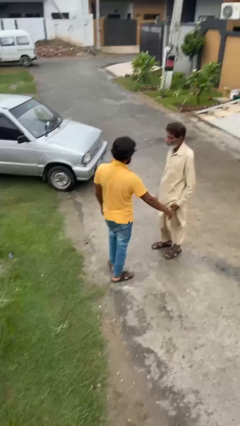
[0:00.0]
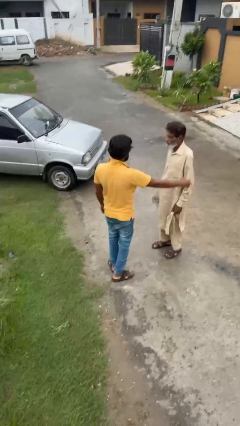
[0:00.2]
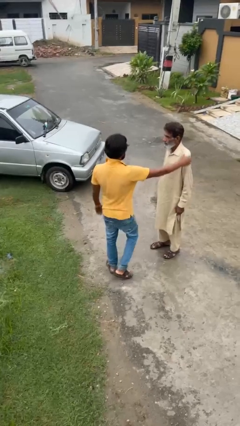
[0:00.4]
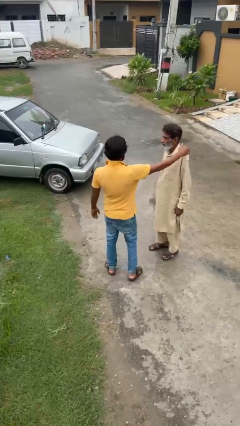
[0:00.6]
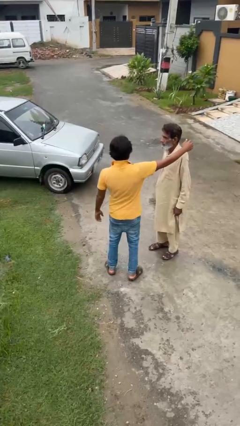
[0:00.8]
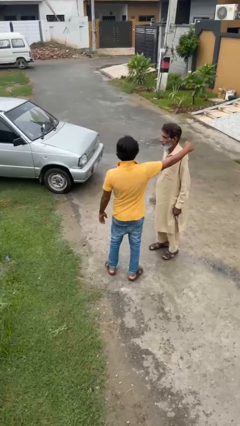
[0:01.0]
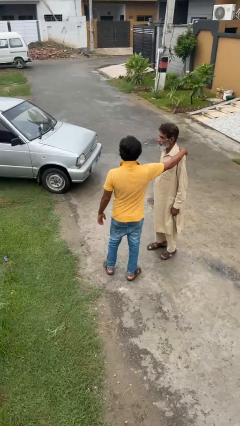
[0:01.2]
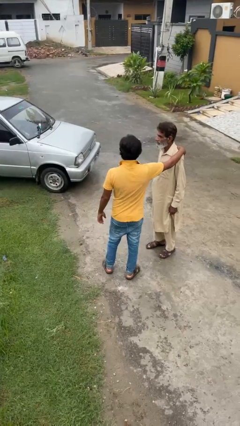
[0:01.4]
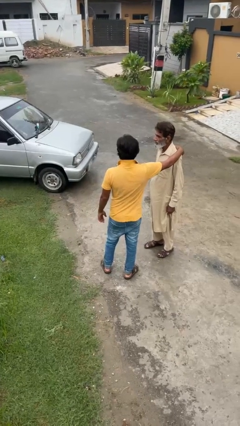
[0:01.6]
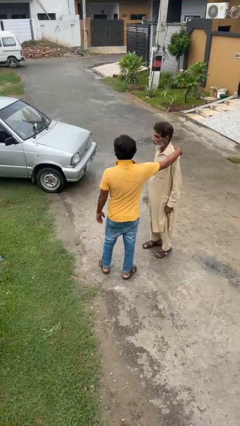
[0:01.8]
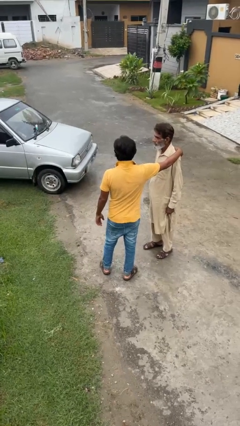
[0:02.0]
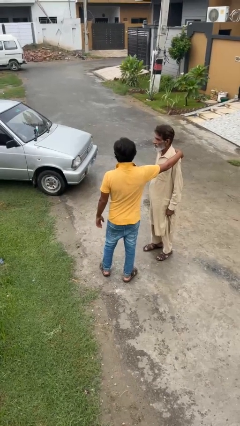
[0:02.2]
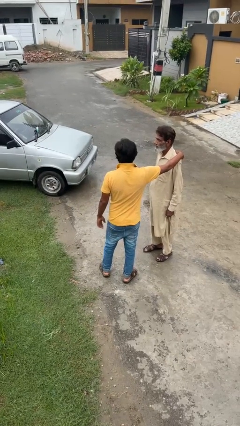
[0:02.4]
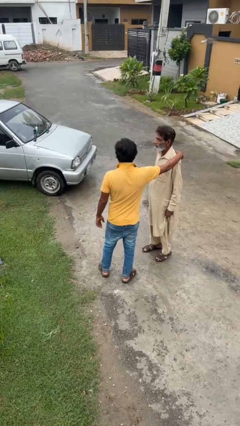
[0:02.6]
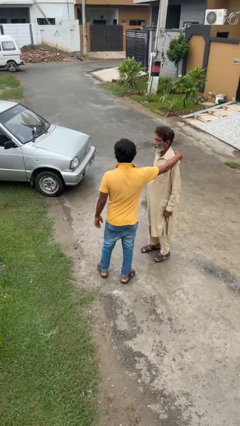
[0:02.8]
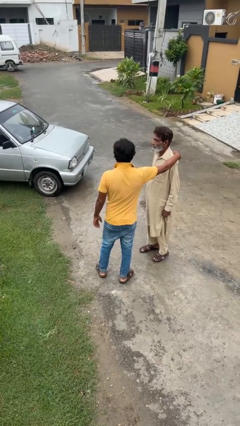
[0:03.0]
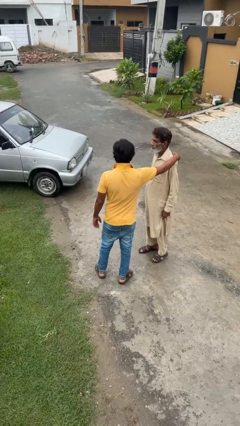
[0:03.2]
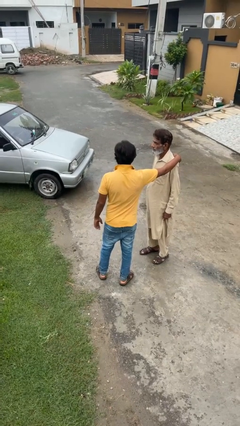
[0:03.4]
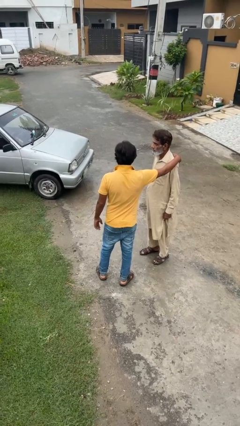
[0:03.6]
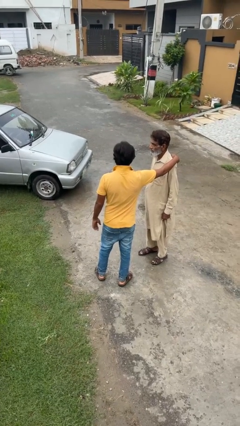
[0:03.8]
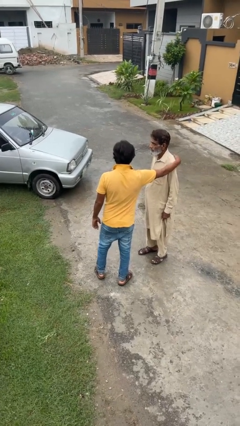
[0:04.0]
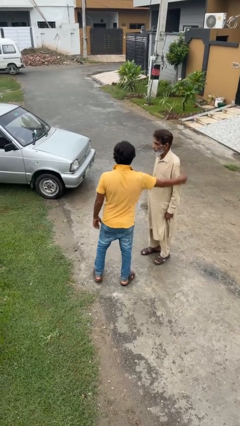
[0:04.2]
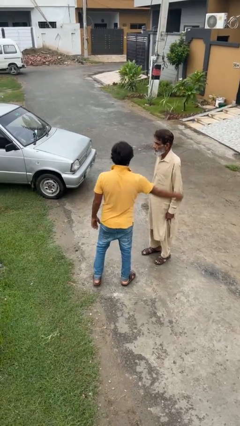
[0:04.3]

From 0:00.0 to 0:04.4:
person pounds shoulders of person

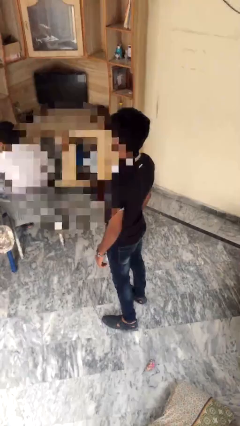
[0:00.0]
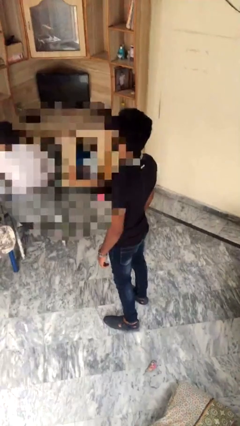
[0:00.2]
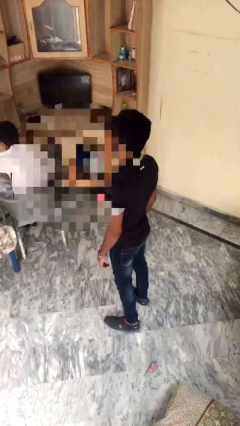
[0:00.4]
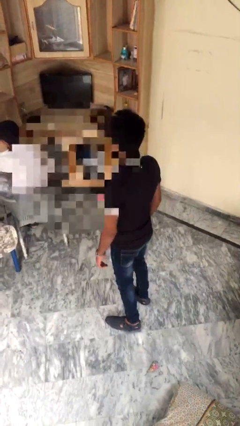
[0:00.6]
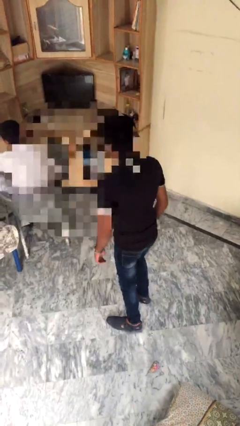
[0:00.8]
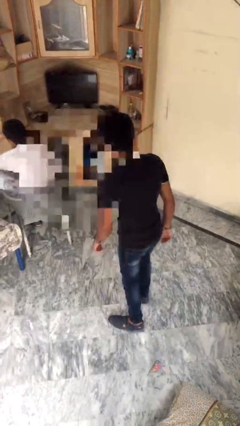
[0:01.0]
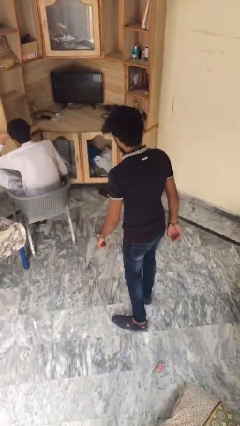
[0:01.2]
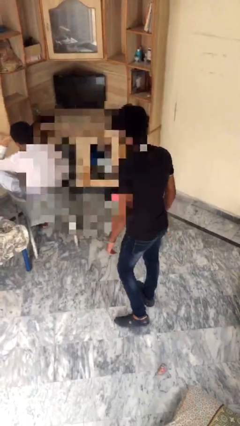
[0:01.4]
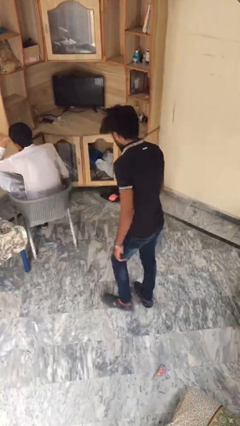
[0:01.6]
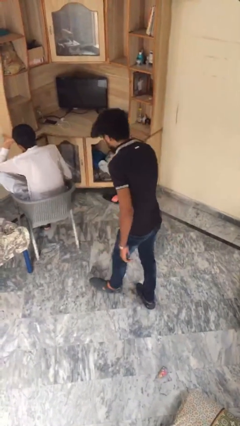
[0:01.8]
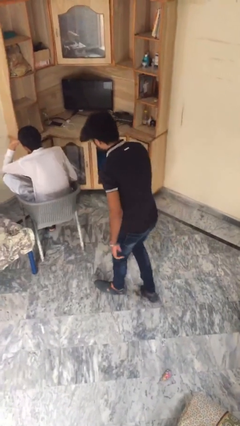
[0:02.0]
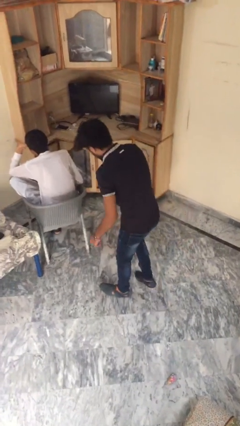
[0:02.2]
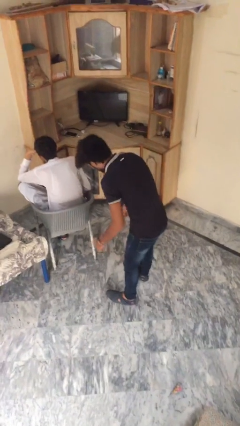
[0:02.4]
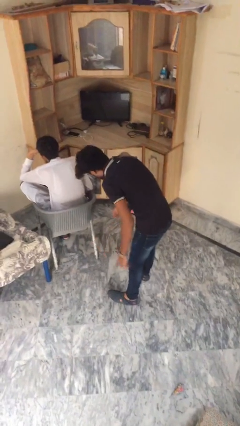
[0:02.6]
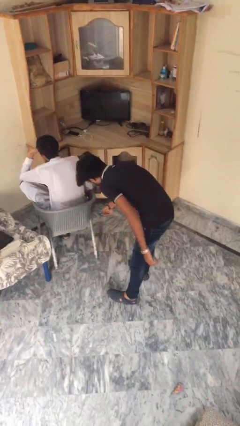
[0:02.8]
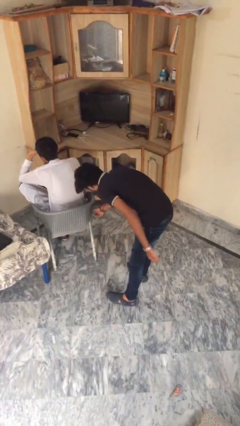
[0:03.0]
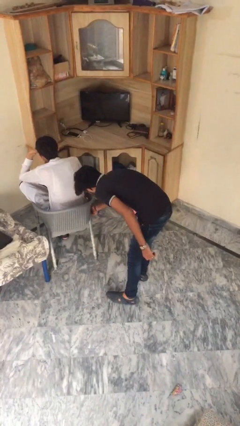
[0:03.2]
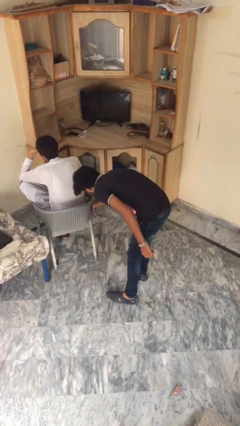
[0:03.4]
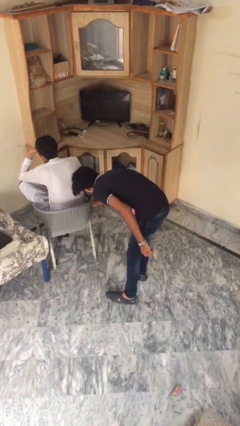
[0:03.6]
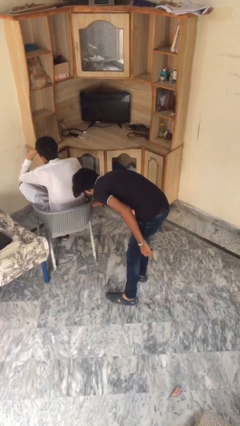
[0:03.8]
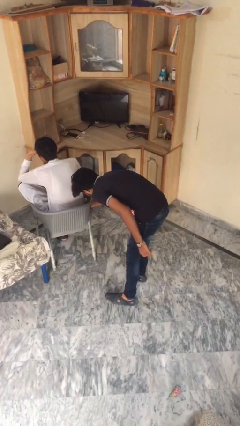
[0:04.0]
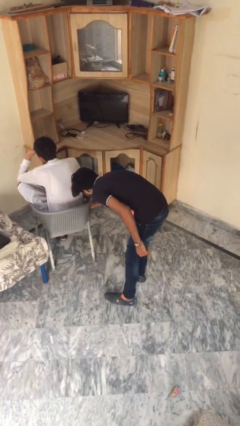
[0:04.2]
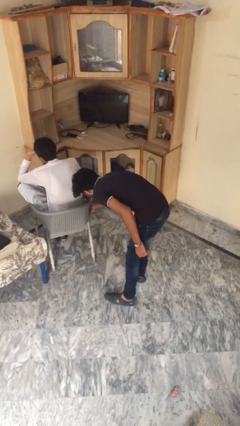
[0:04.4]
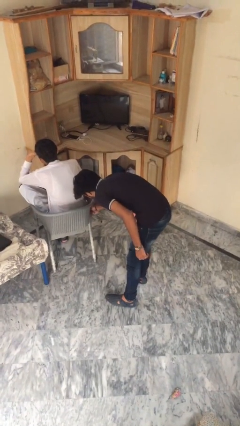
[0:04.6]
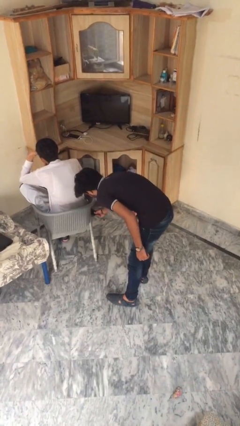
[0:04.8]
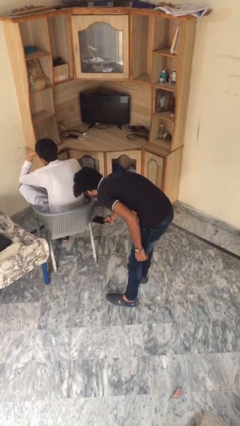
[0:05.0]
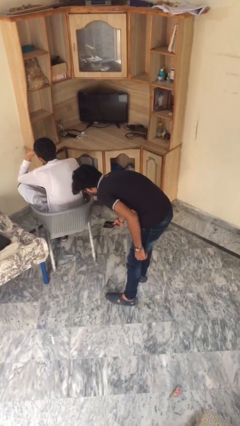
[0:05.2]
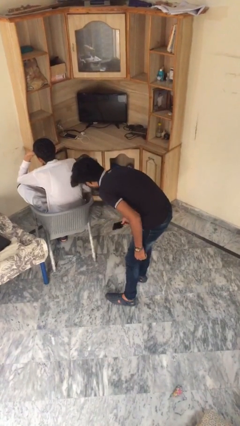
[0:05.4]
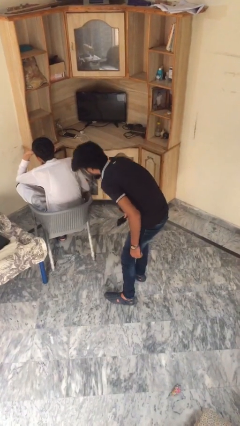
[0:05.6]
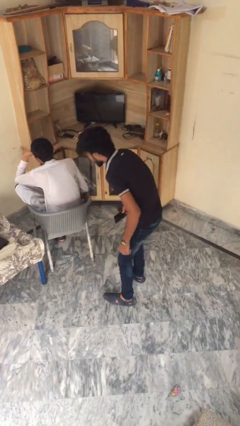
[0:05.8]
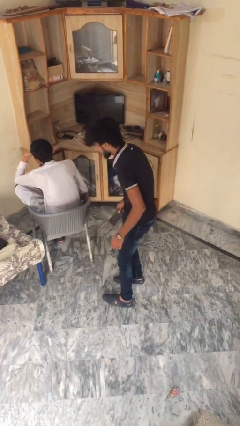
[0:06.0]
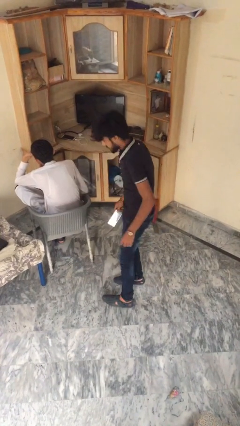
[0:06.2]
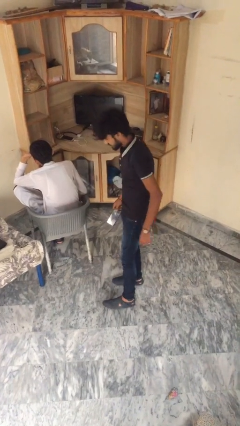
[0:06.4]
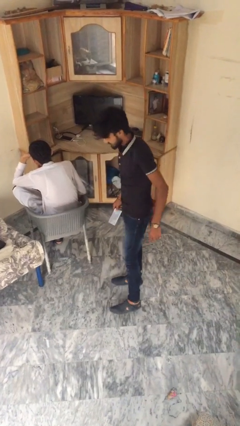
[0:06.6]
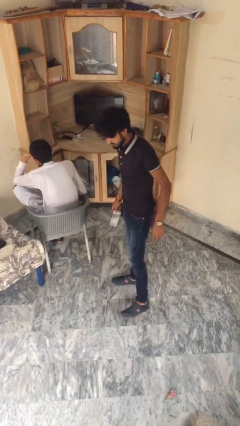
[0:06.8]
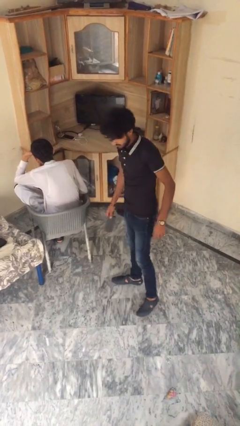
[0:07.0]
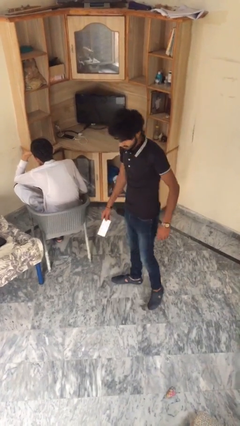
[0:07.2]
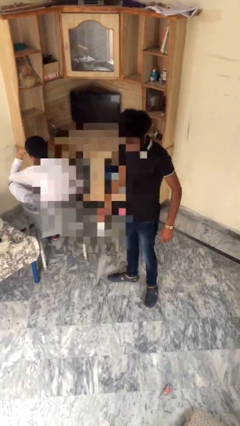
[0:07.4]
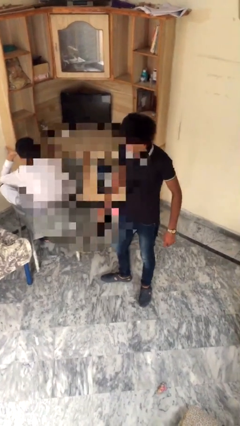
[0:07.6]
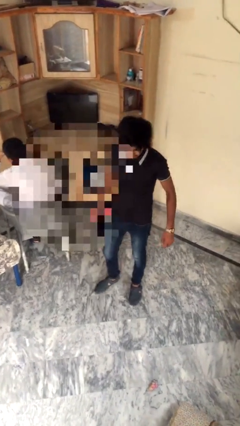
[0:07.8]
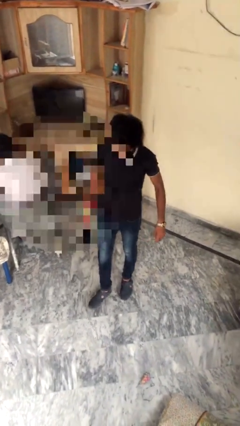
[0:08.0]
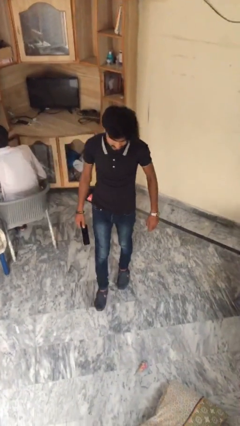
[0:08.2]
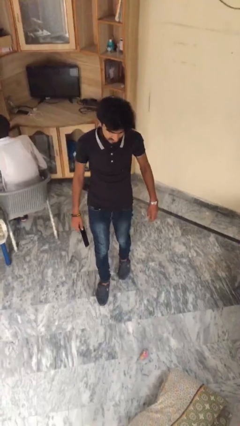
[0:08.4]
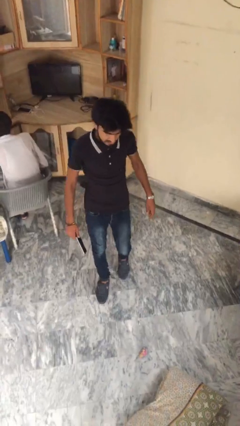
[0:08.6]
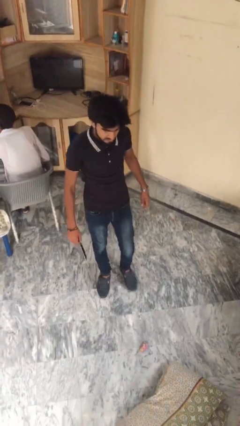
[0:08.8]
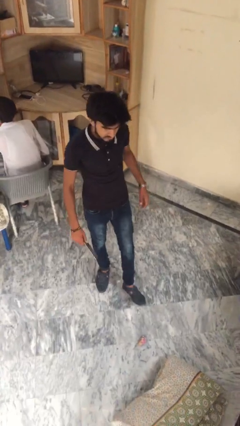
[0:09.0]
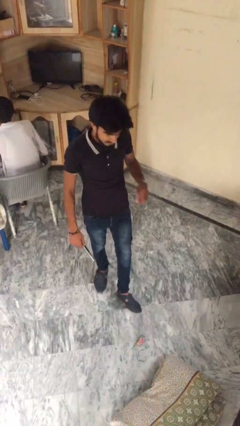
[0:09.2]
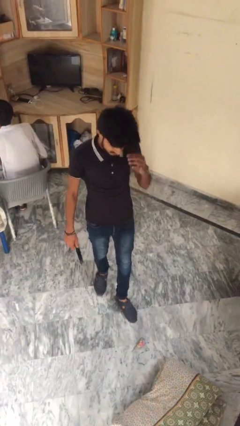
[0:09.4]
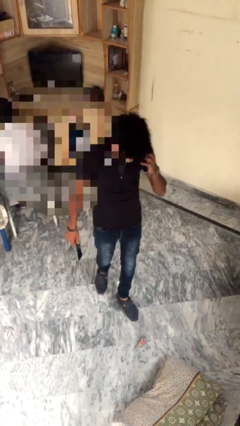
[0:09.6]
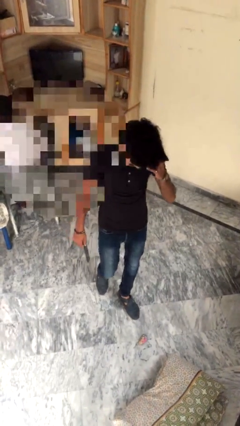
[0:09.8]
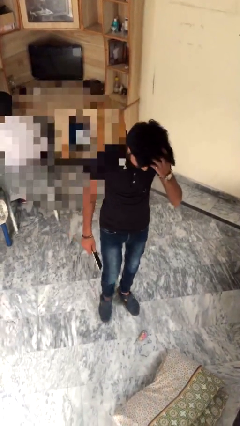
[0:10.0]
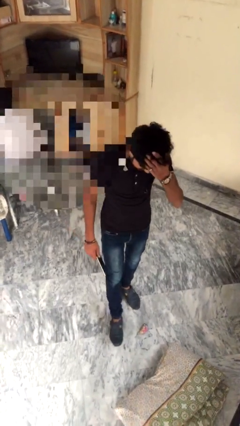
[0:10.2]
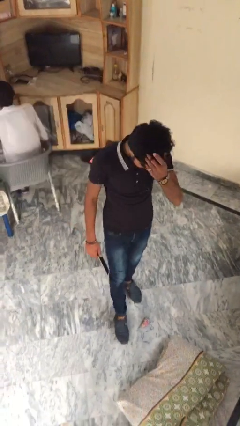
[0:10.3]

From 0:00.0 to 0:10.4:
person steals object from person

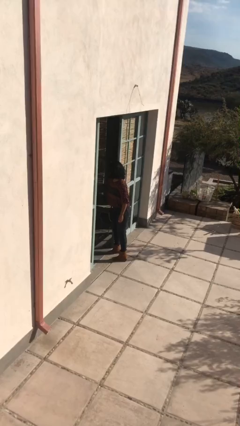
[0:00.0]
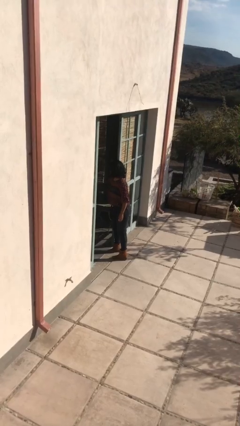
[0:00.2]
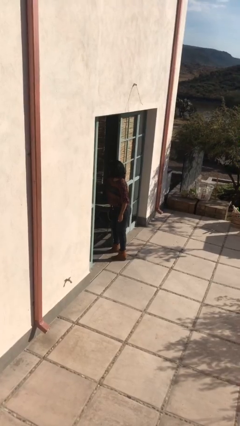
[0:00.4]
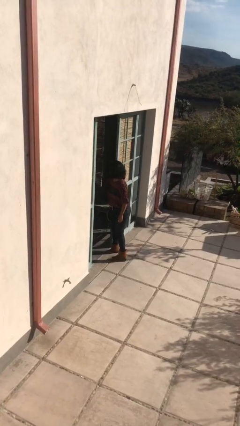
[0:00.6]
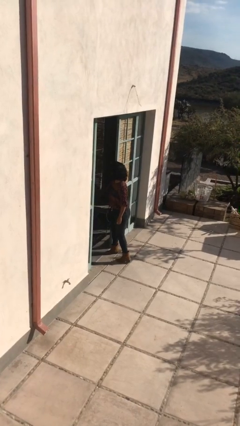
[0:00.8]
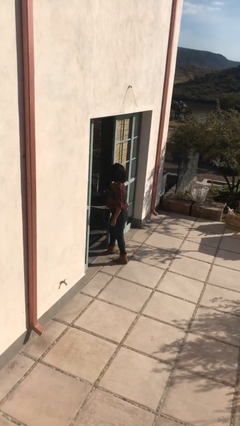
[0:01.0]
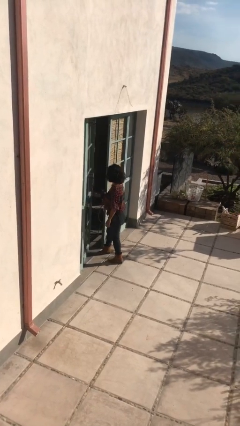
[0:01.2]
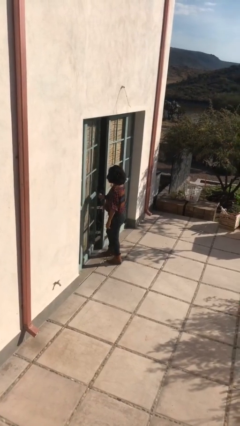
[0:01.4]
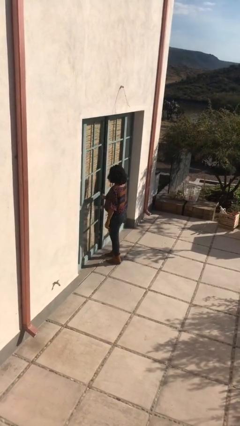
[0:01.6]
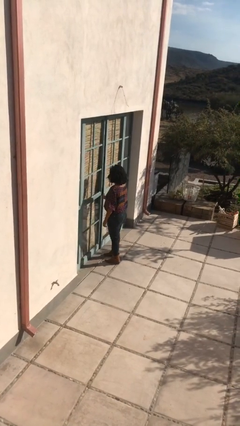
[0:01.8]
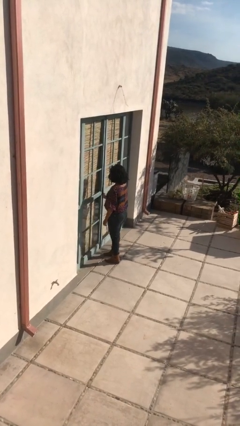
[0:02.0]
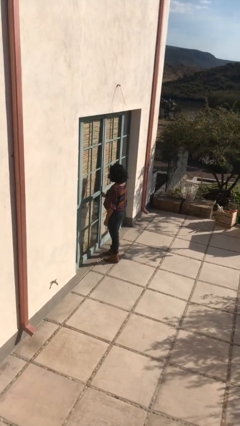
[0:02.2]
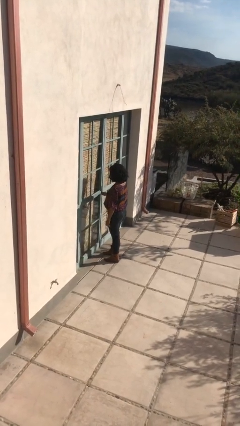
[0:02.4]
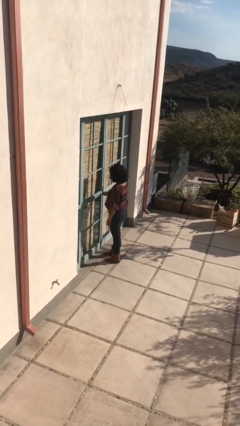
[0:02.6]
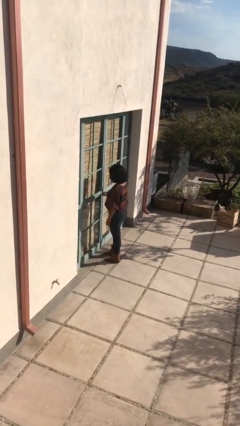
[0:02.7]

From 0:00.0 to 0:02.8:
person closes facility door
